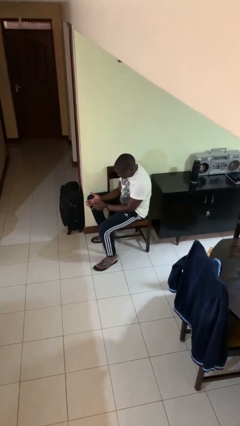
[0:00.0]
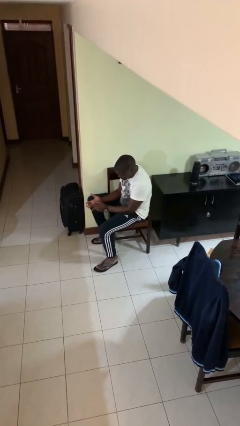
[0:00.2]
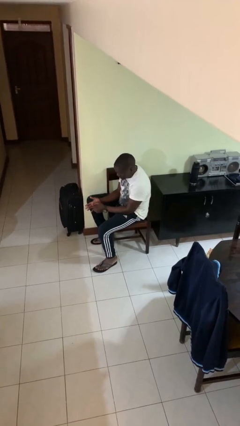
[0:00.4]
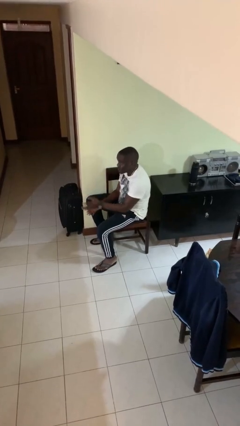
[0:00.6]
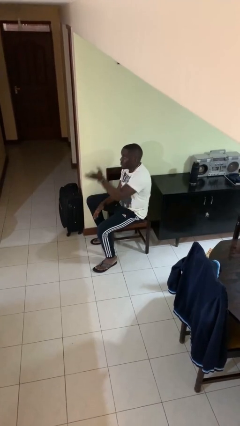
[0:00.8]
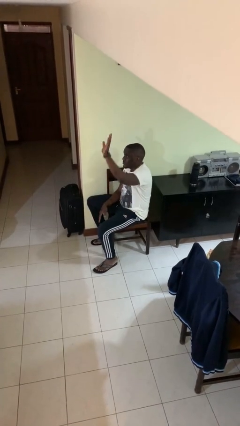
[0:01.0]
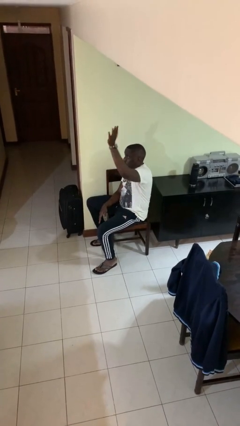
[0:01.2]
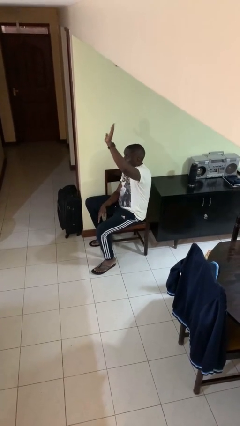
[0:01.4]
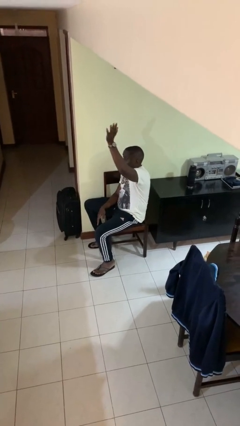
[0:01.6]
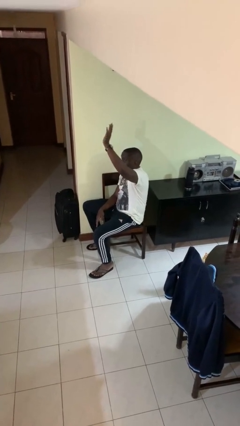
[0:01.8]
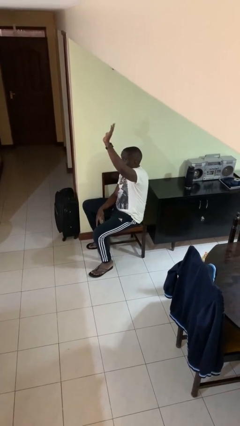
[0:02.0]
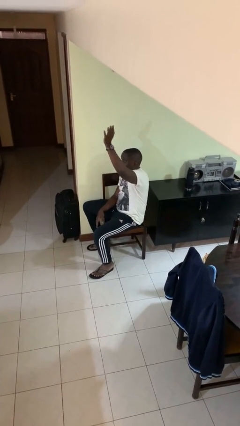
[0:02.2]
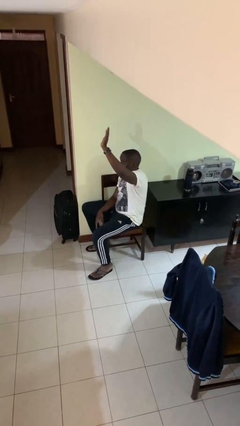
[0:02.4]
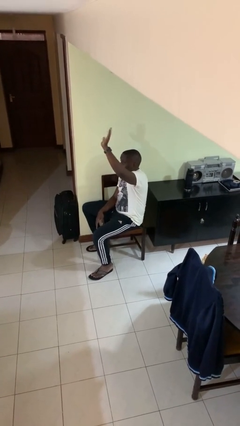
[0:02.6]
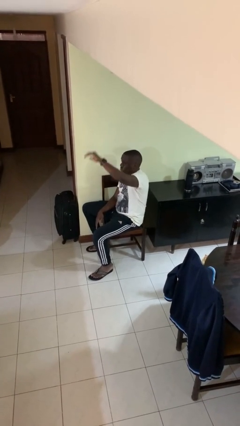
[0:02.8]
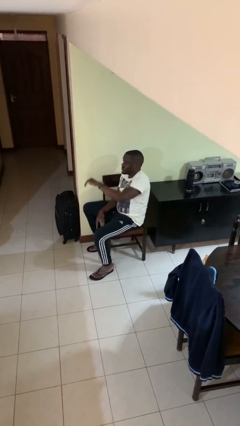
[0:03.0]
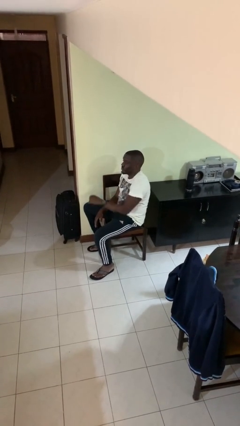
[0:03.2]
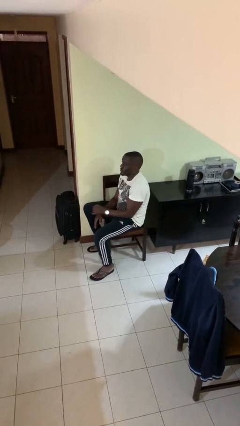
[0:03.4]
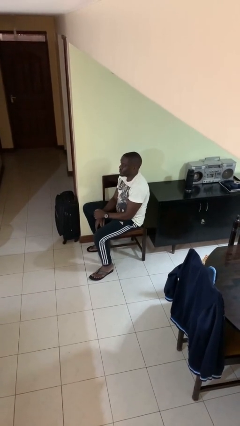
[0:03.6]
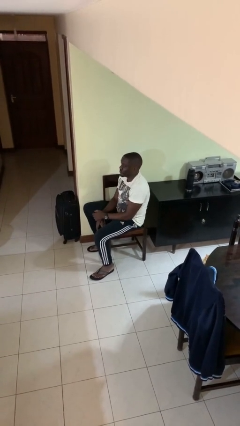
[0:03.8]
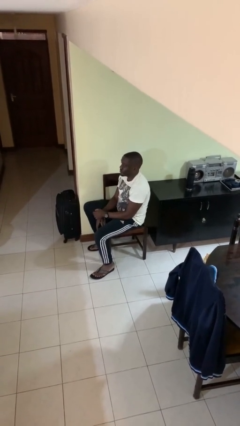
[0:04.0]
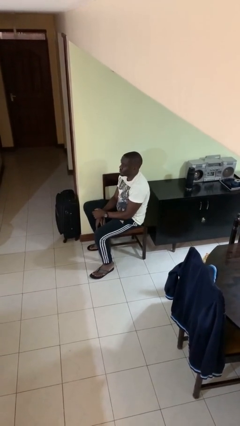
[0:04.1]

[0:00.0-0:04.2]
person waves at person

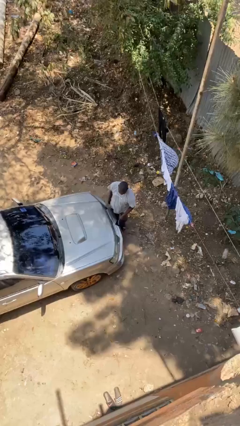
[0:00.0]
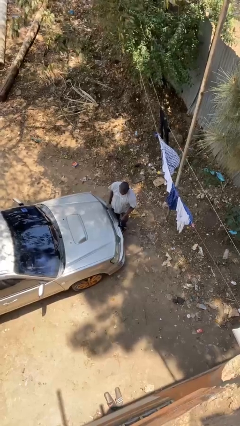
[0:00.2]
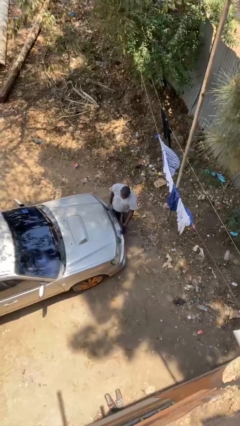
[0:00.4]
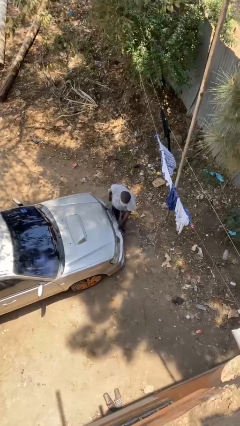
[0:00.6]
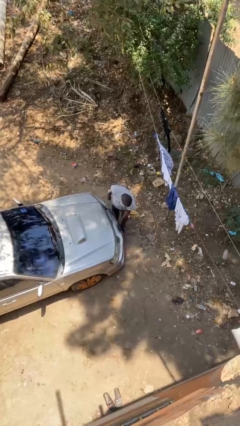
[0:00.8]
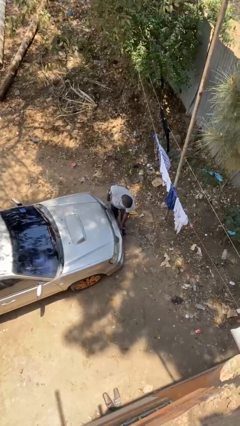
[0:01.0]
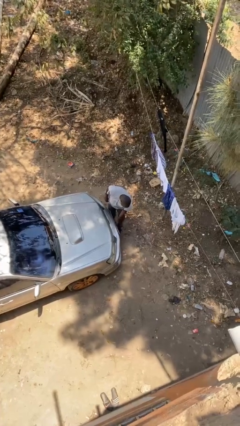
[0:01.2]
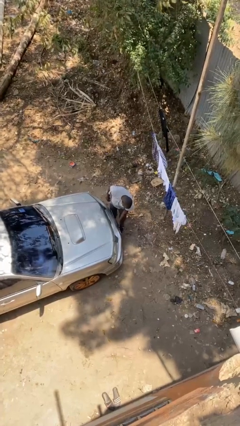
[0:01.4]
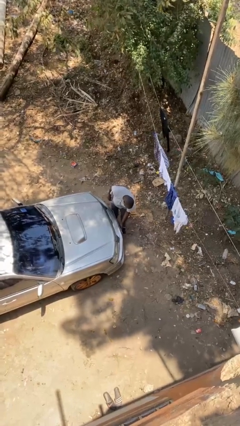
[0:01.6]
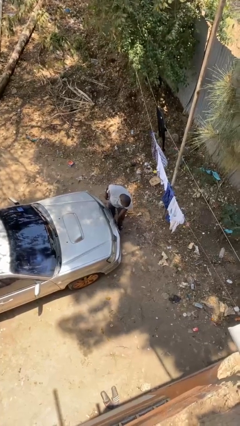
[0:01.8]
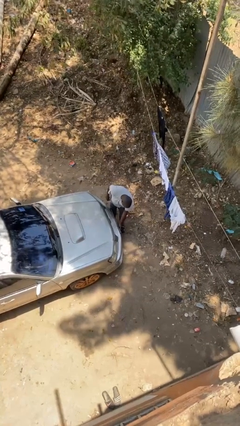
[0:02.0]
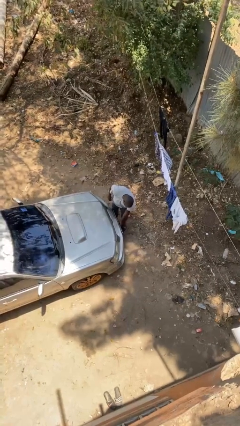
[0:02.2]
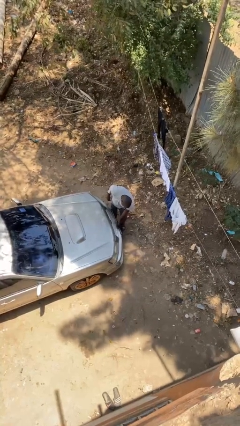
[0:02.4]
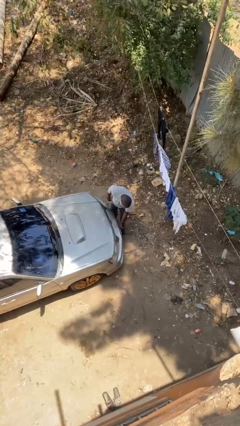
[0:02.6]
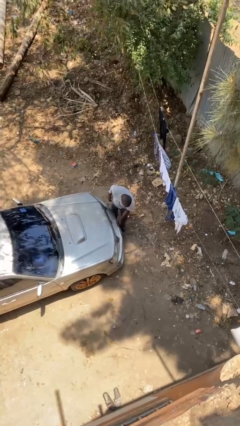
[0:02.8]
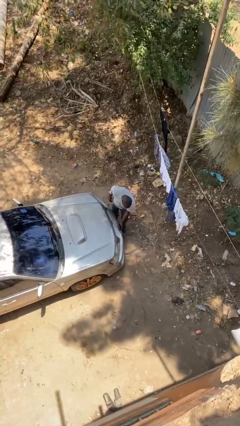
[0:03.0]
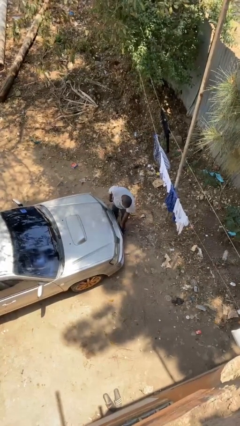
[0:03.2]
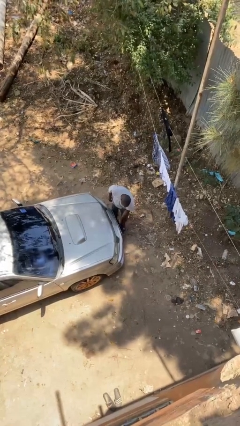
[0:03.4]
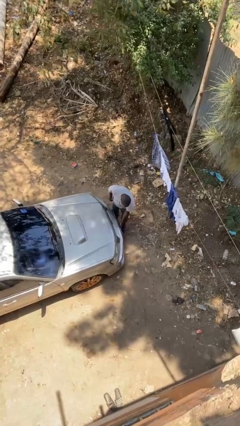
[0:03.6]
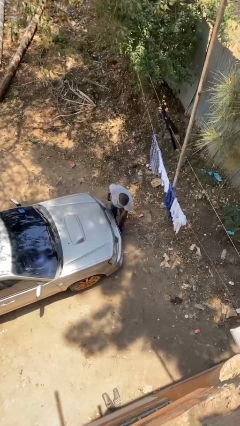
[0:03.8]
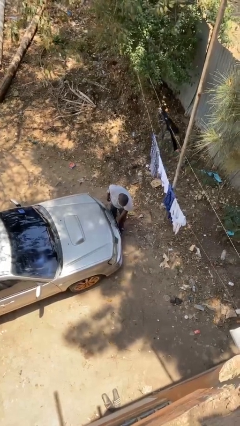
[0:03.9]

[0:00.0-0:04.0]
person polishes car with rag

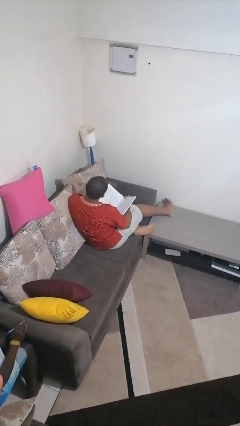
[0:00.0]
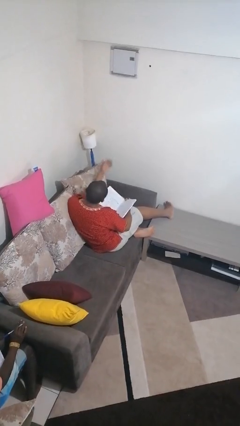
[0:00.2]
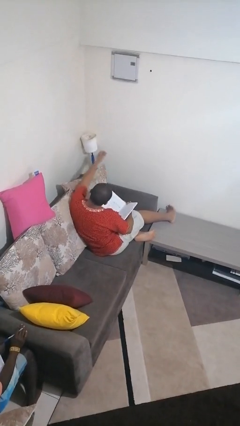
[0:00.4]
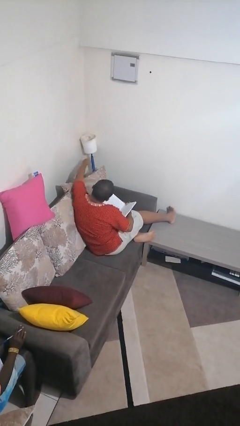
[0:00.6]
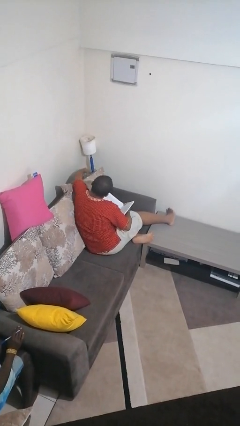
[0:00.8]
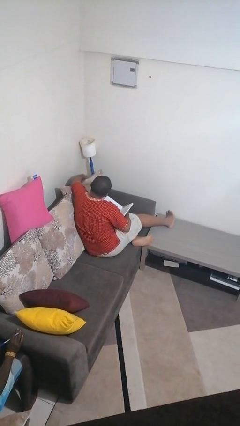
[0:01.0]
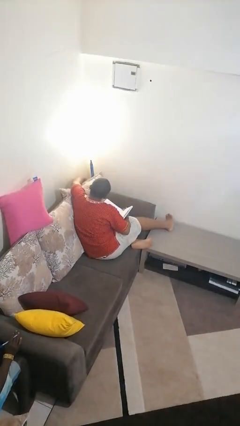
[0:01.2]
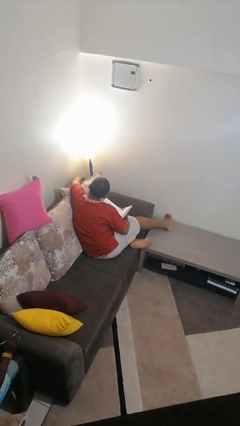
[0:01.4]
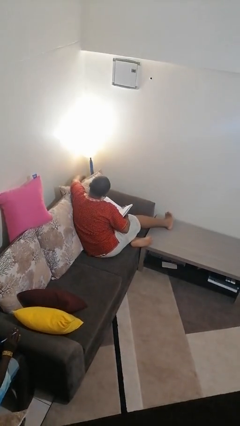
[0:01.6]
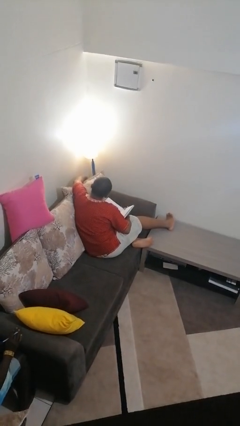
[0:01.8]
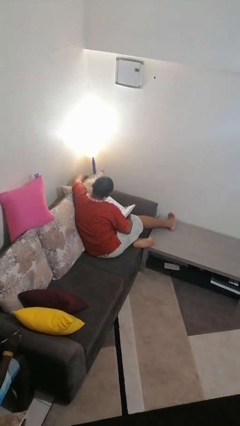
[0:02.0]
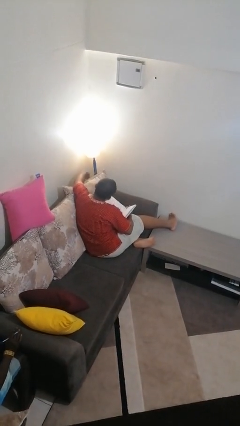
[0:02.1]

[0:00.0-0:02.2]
person turns on lamp

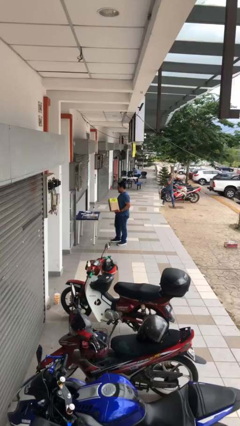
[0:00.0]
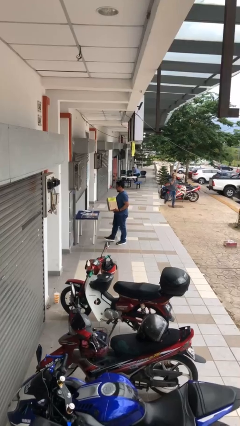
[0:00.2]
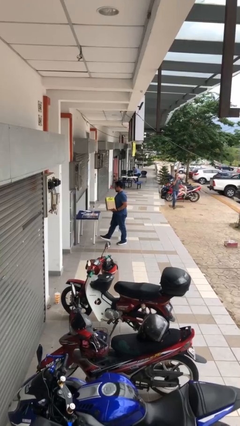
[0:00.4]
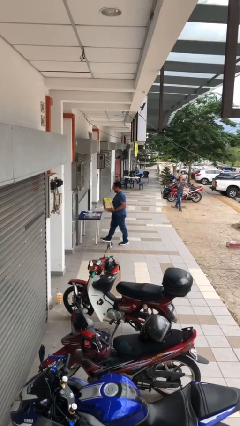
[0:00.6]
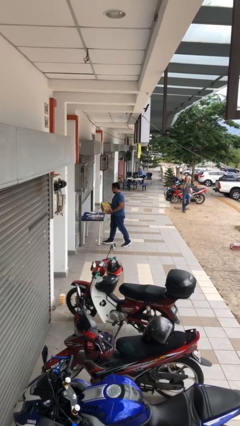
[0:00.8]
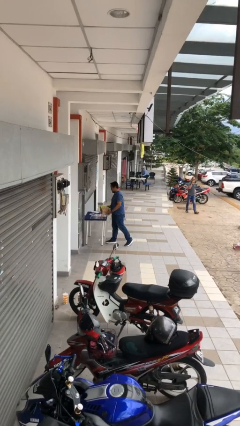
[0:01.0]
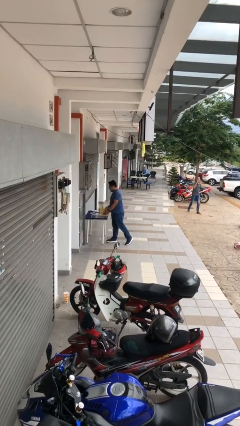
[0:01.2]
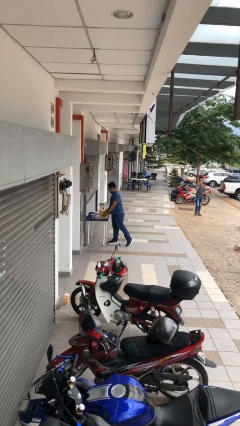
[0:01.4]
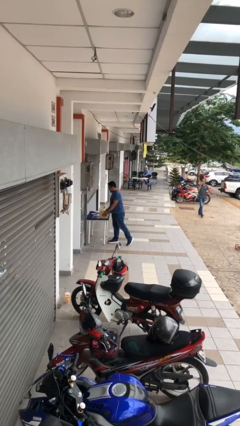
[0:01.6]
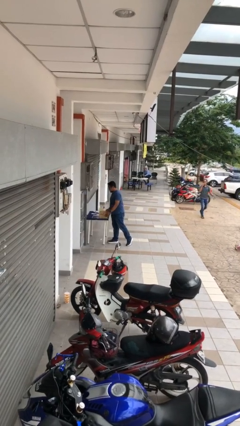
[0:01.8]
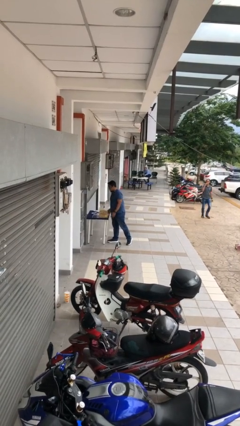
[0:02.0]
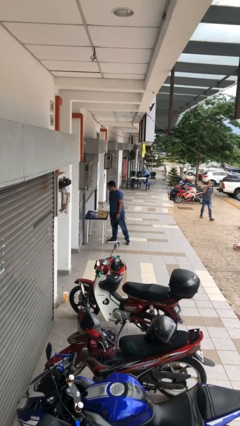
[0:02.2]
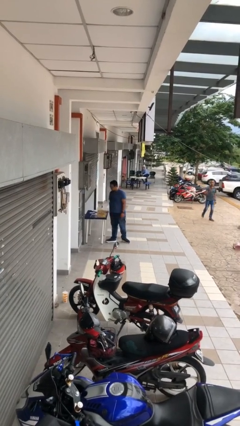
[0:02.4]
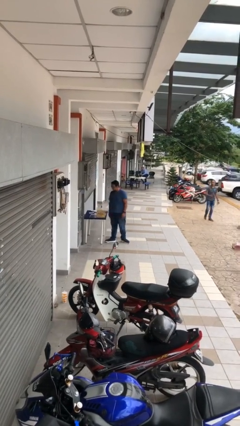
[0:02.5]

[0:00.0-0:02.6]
person puts down object on table

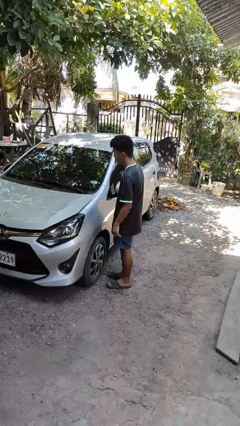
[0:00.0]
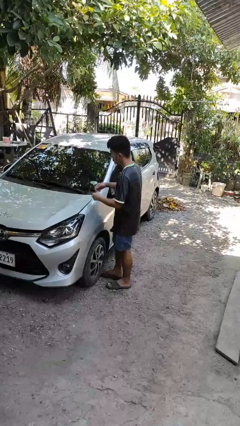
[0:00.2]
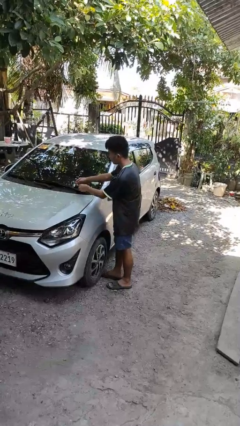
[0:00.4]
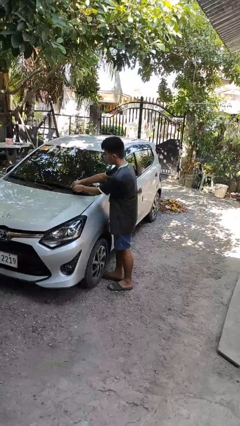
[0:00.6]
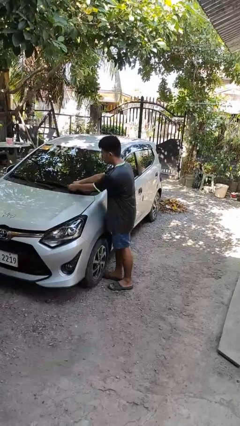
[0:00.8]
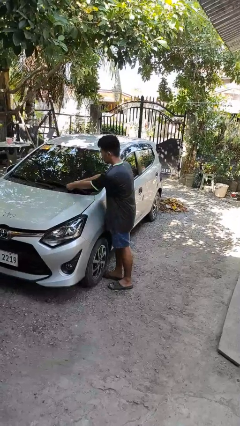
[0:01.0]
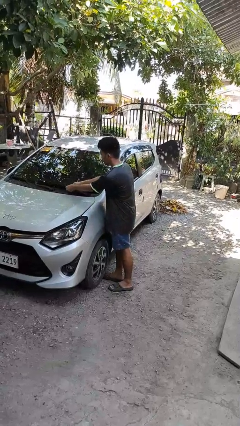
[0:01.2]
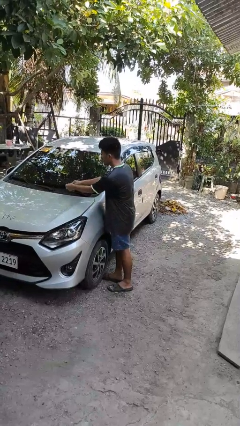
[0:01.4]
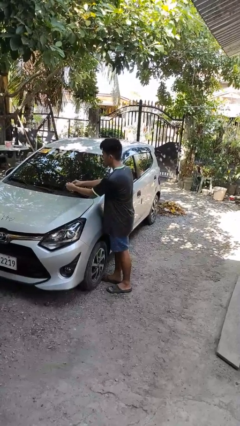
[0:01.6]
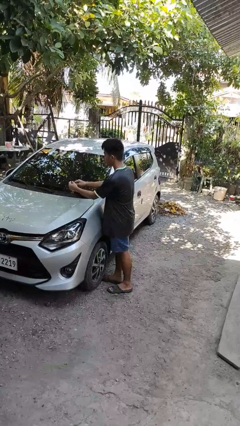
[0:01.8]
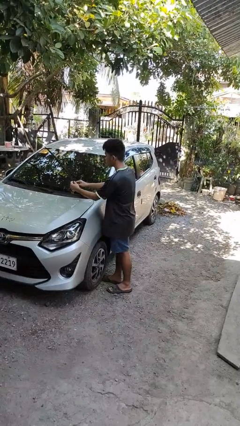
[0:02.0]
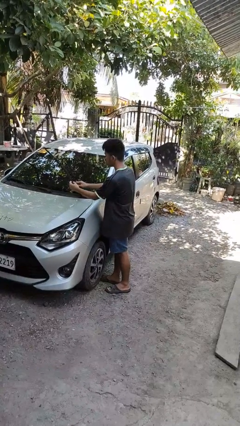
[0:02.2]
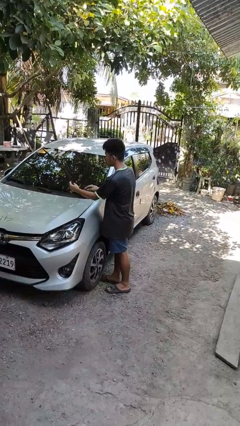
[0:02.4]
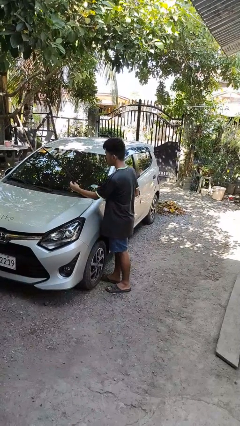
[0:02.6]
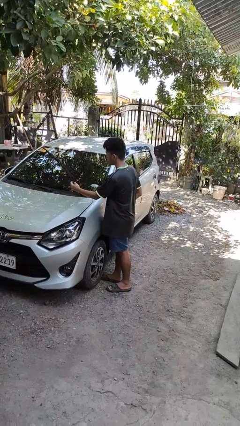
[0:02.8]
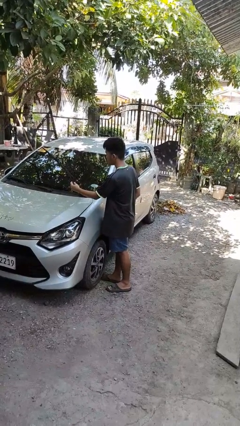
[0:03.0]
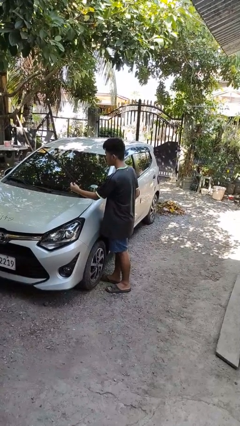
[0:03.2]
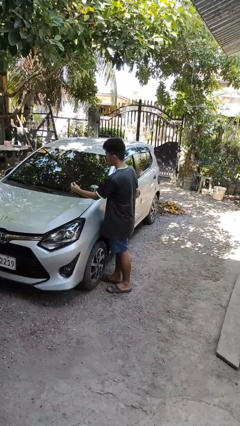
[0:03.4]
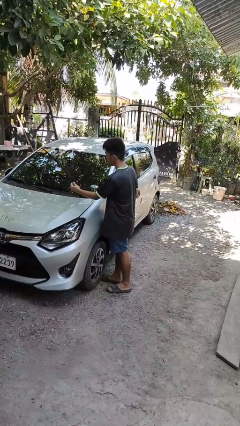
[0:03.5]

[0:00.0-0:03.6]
person flips up car wipers

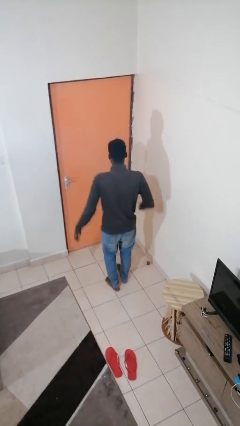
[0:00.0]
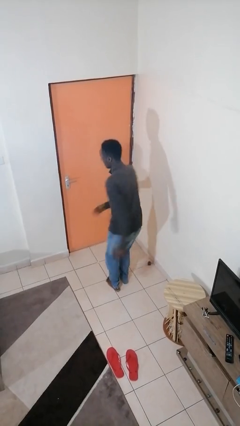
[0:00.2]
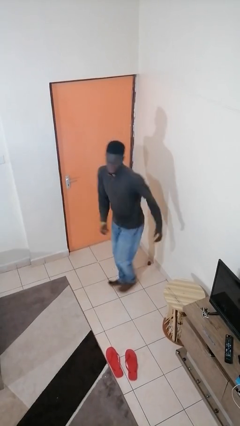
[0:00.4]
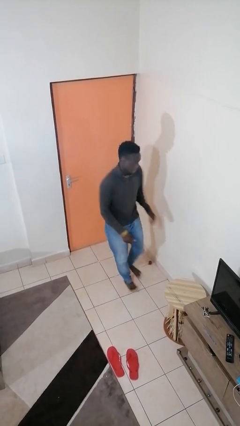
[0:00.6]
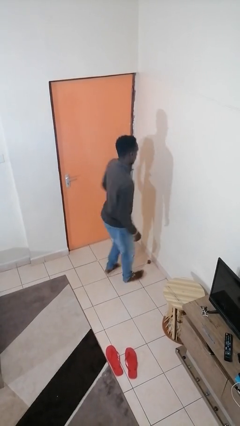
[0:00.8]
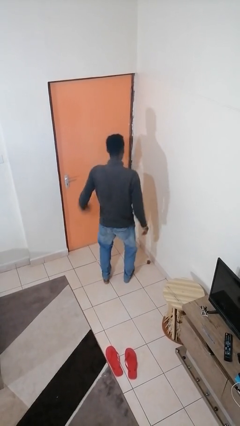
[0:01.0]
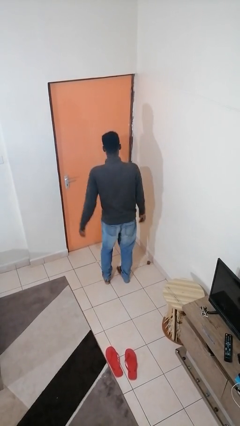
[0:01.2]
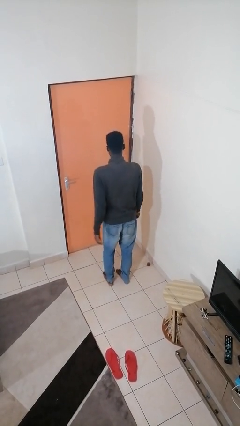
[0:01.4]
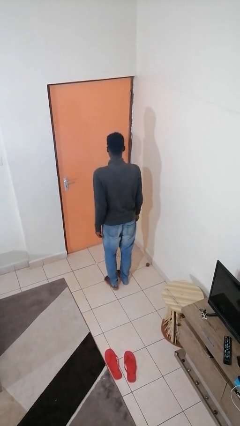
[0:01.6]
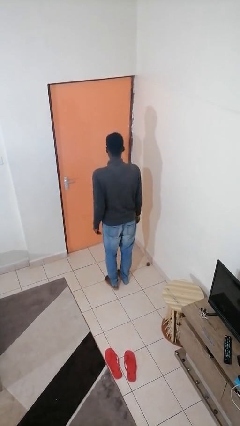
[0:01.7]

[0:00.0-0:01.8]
person twirls
